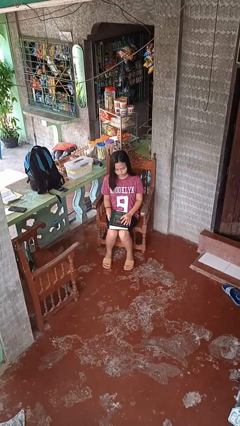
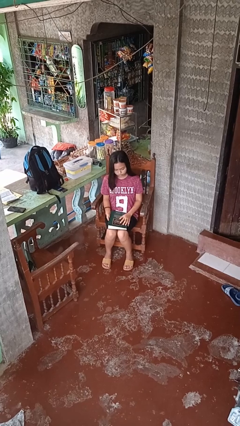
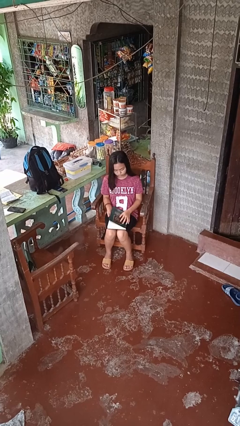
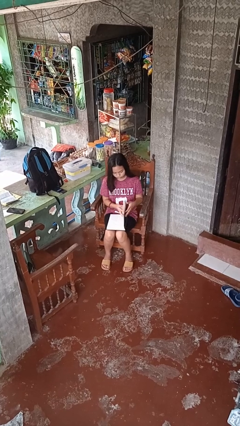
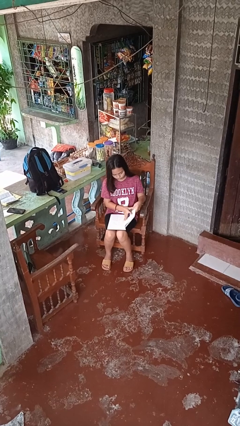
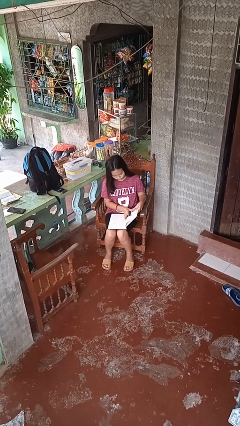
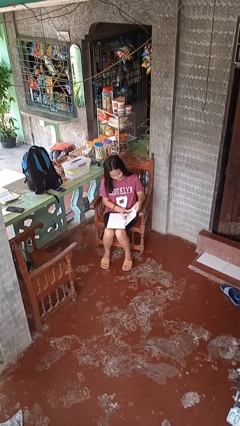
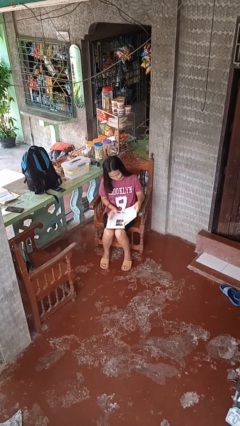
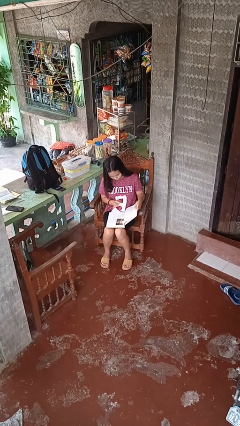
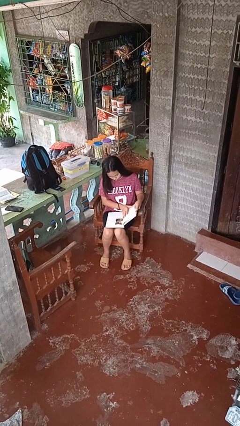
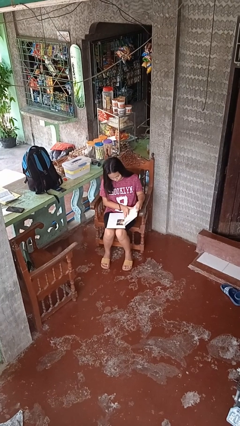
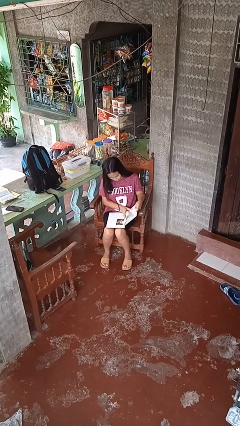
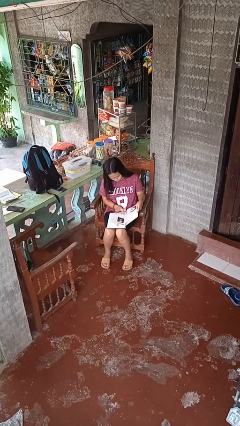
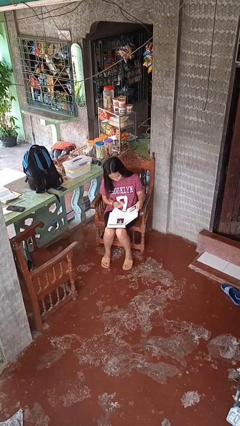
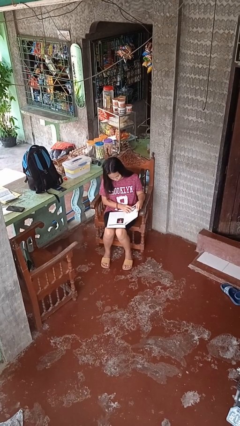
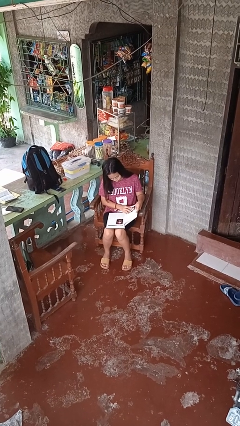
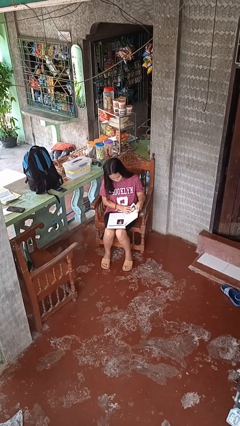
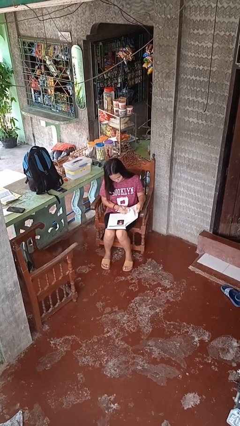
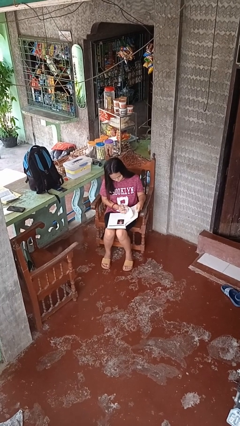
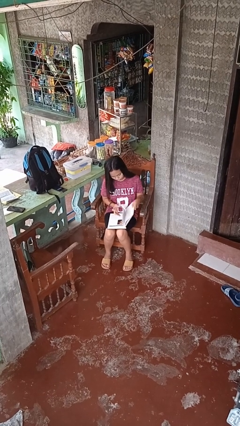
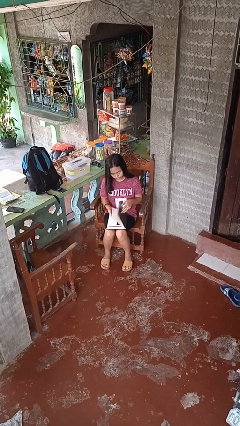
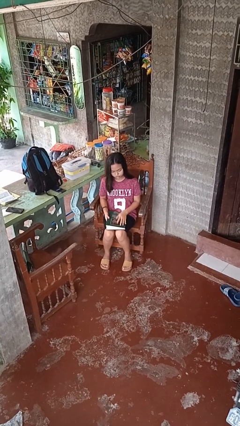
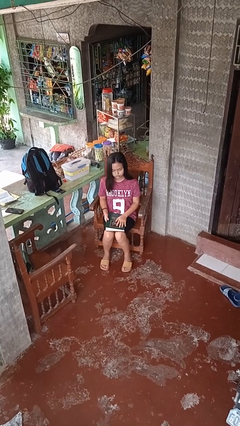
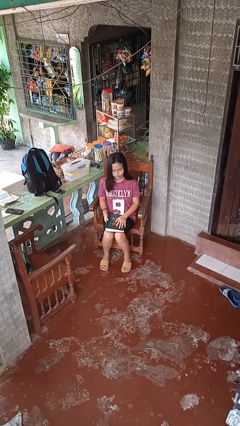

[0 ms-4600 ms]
person reads book

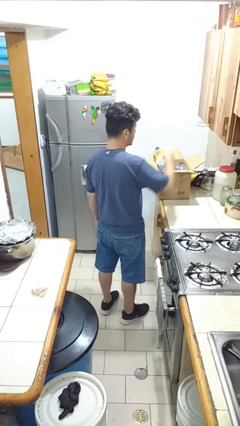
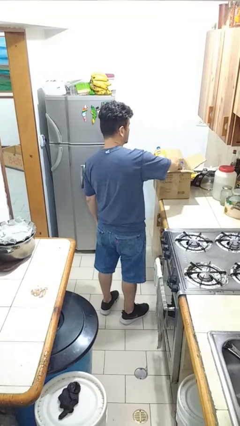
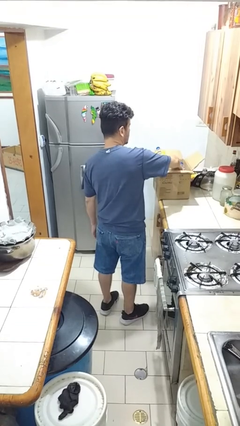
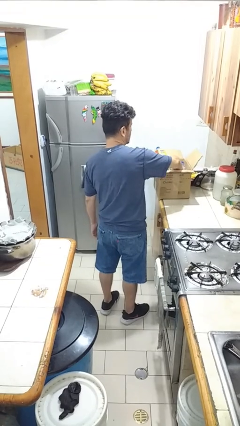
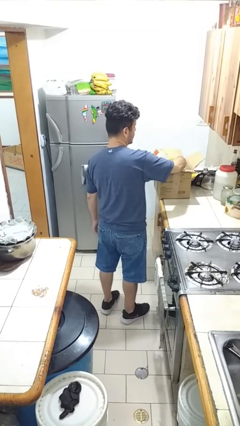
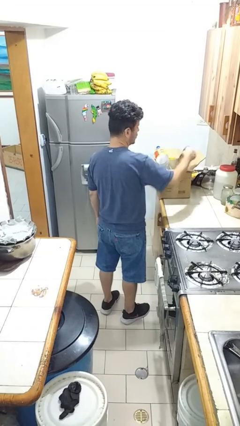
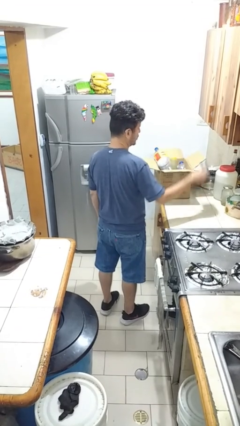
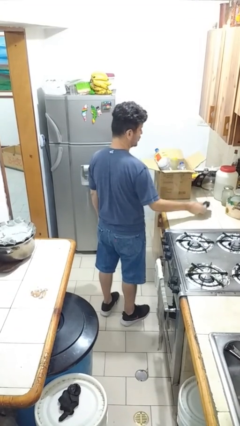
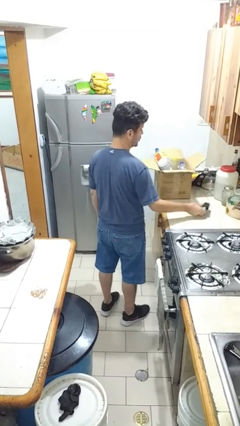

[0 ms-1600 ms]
person takes object from box

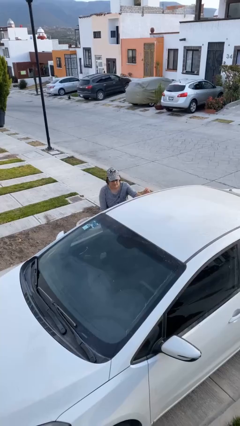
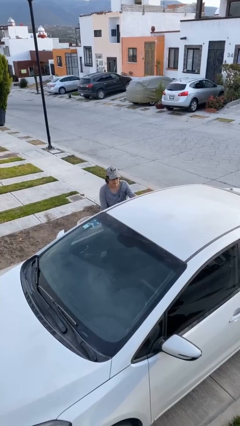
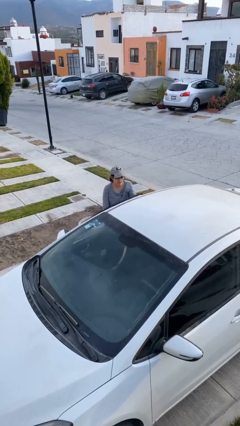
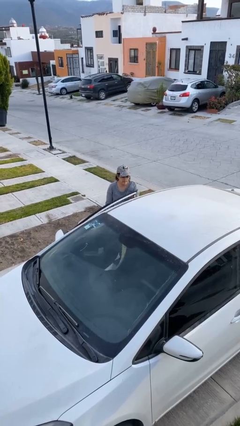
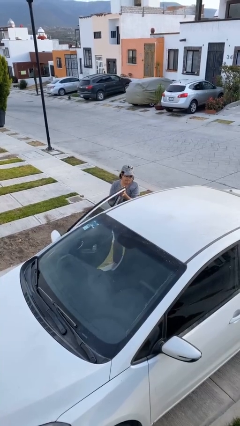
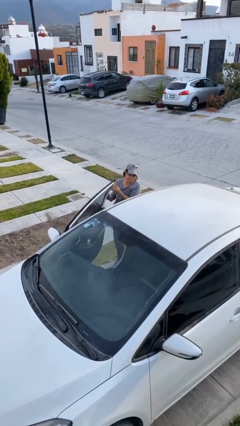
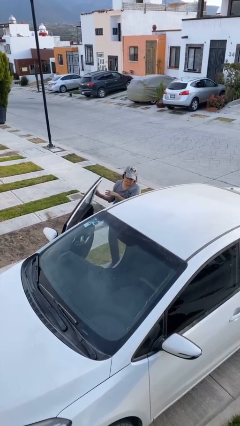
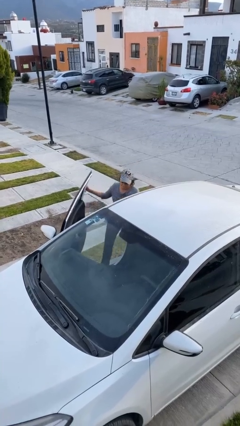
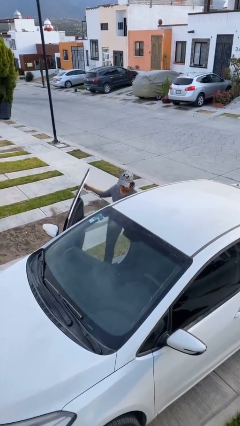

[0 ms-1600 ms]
car picks up person

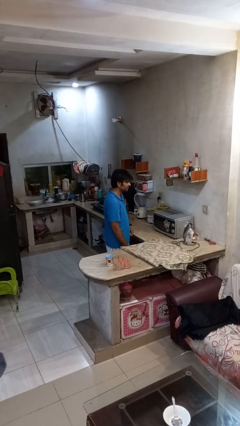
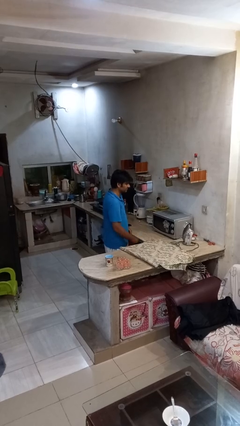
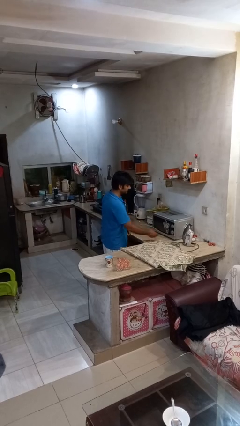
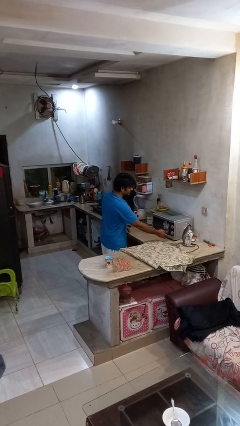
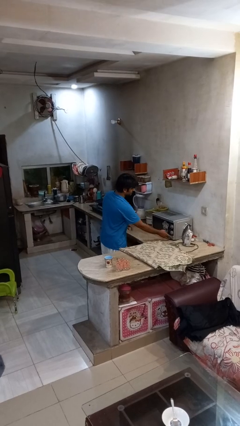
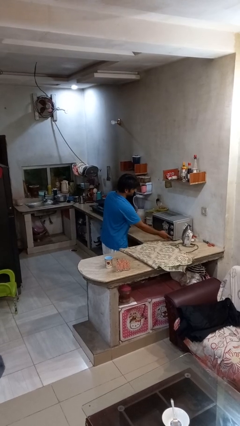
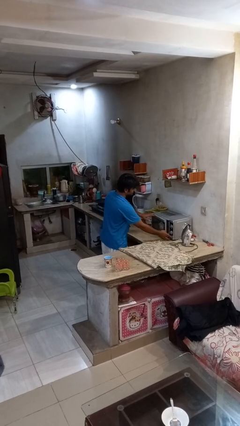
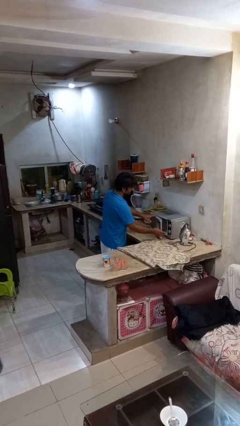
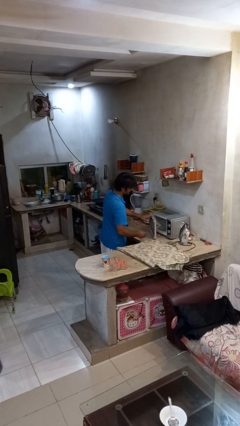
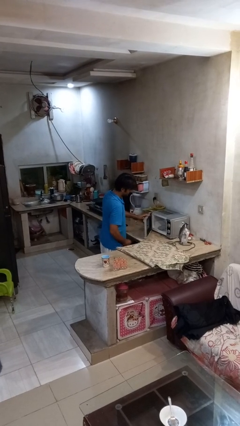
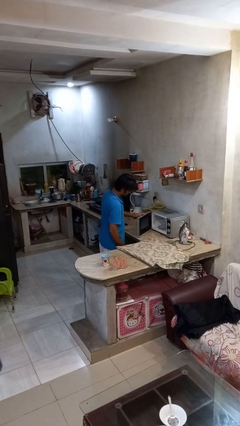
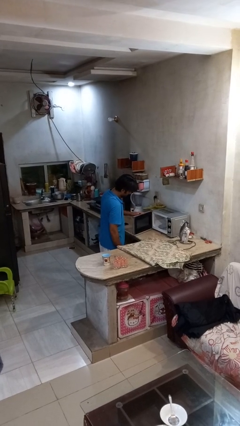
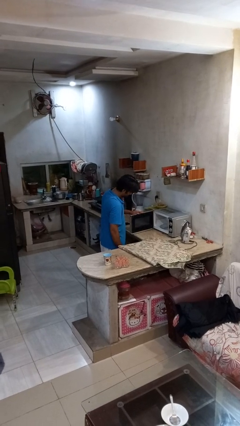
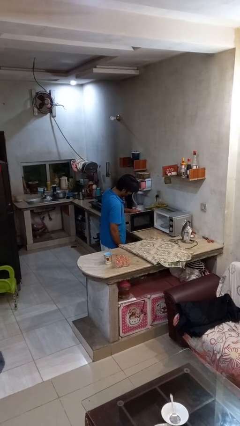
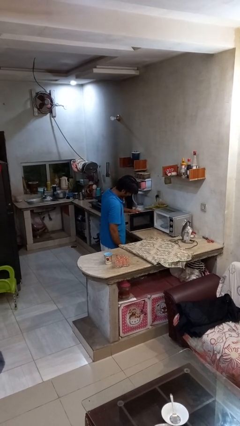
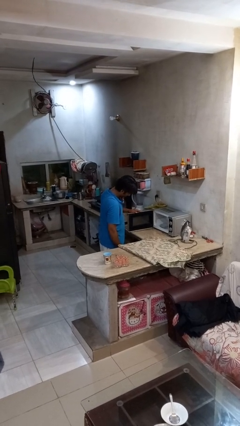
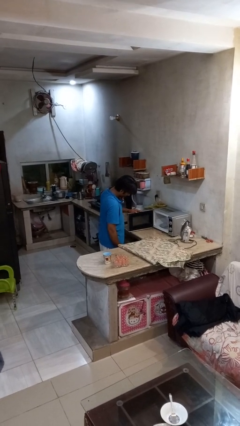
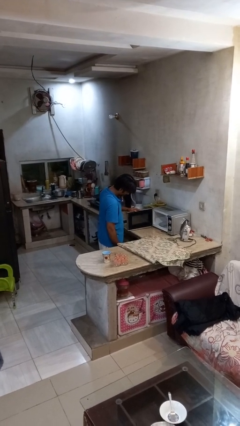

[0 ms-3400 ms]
person opens microwave

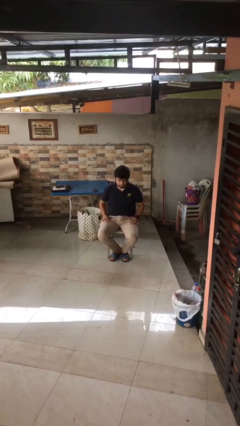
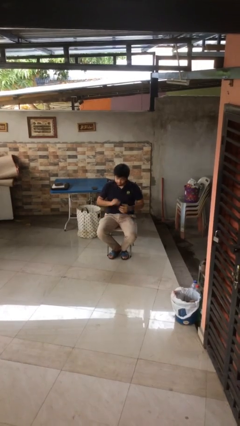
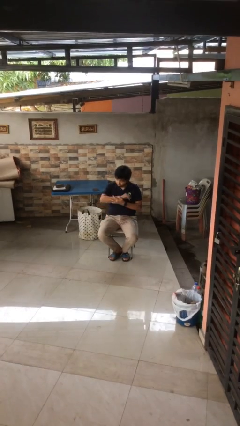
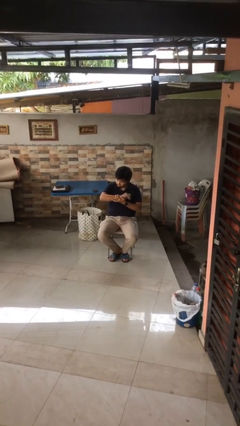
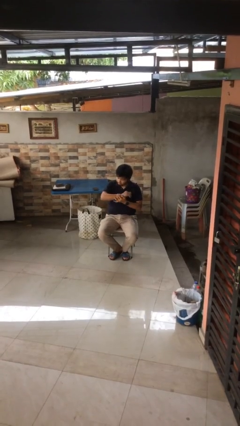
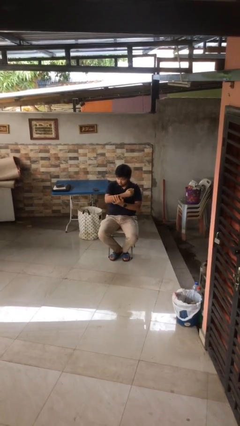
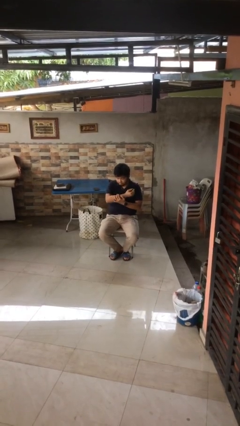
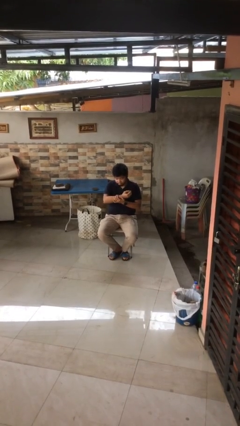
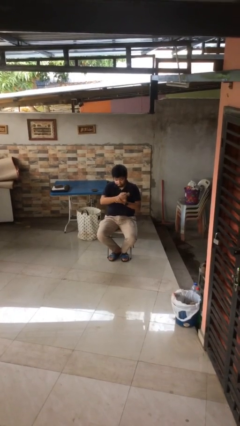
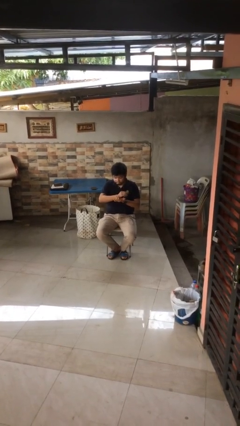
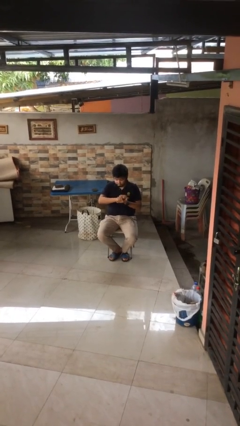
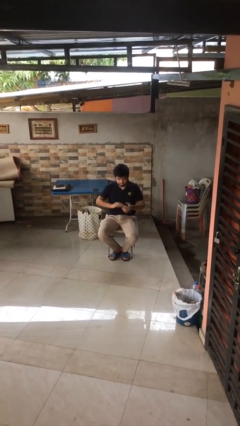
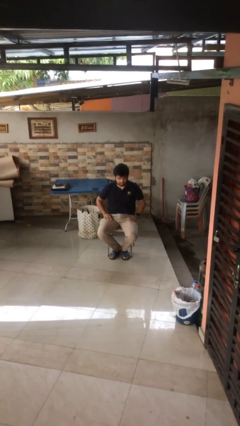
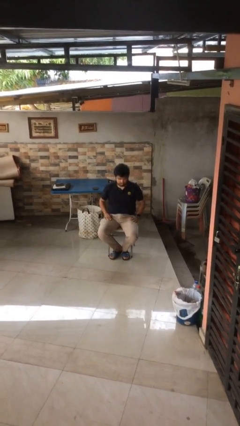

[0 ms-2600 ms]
person looks at hands in lap

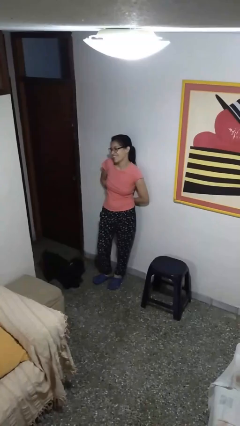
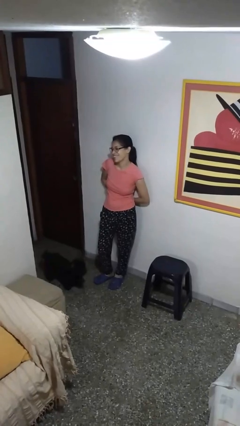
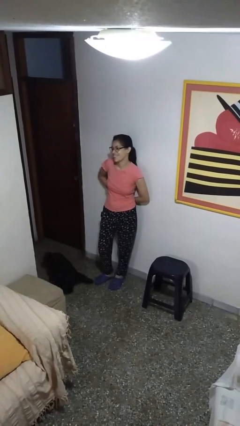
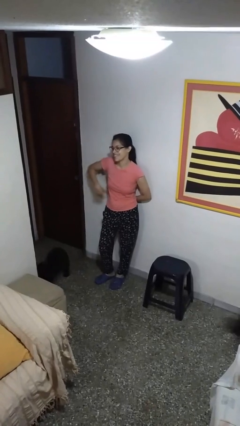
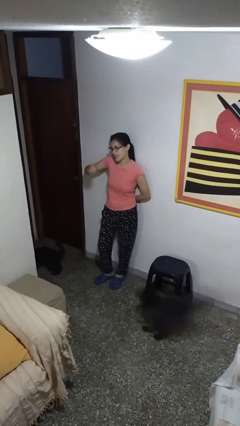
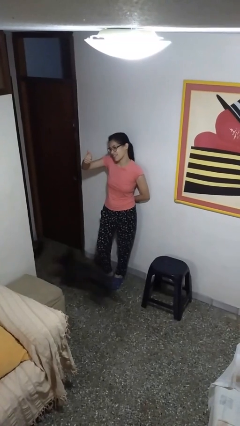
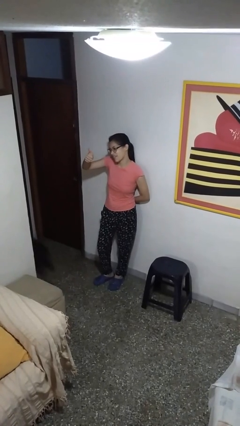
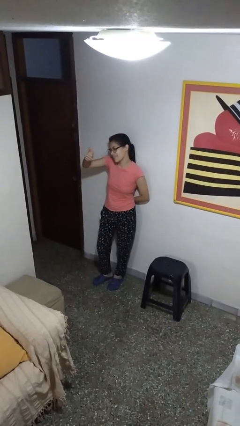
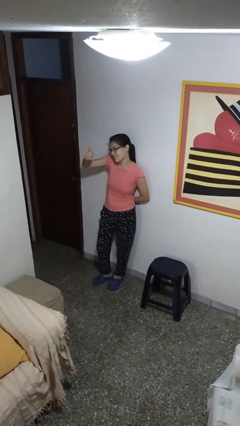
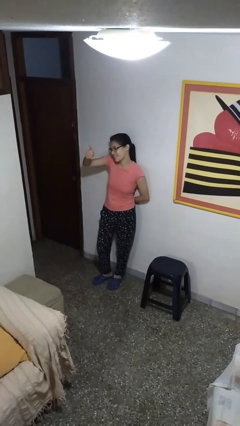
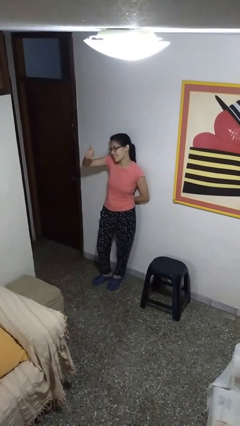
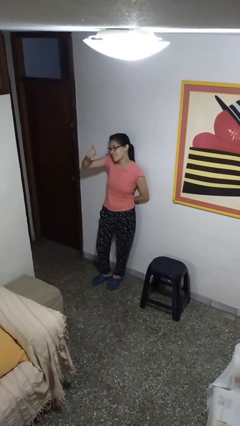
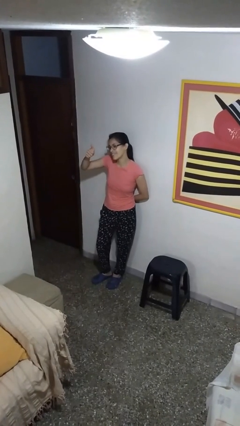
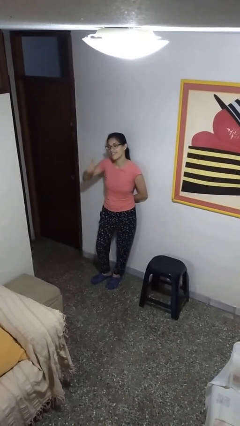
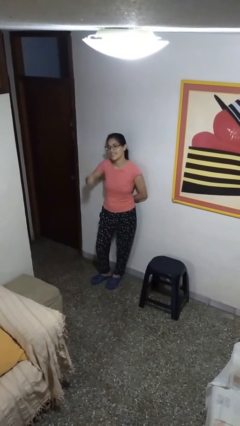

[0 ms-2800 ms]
person gestures thumbs up

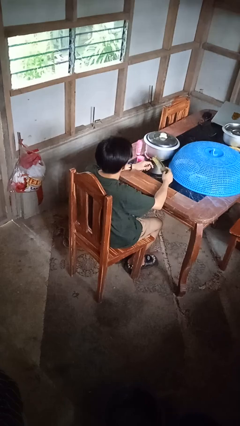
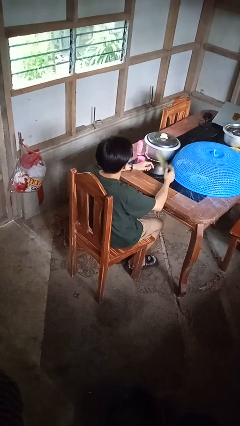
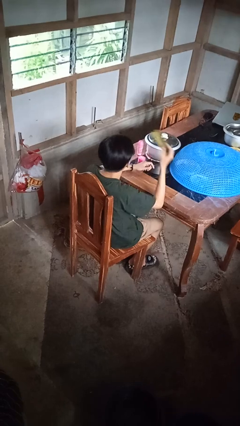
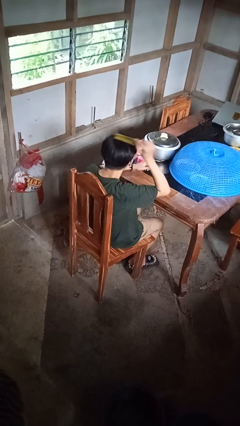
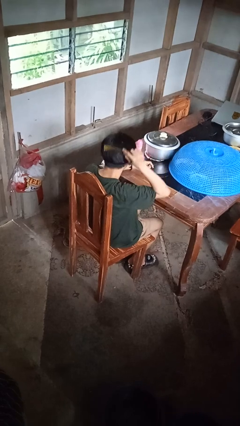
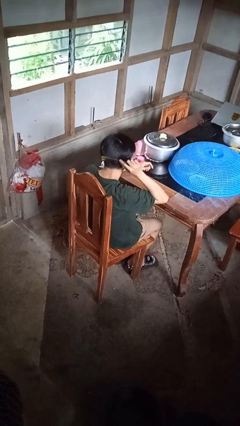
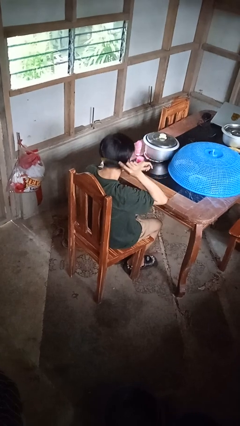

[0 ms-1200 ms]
person brushes hair
